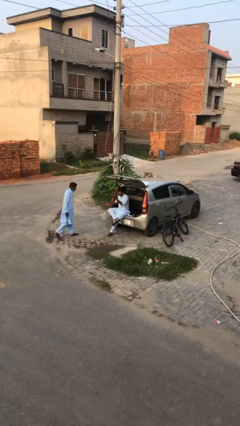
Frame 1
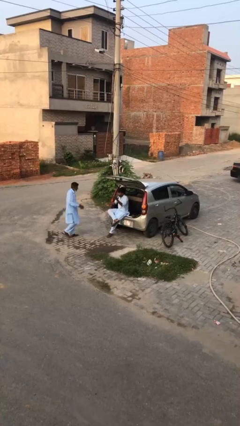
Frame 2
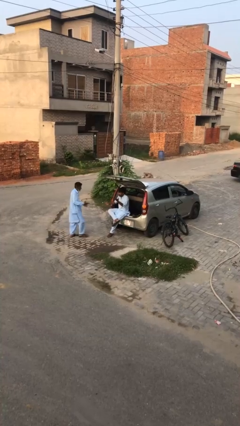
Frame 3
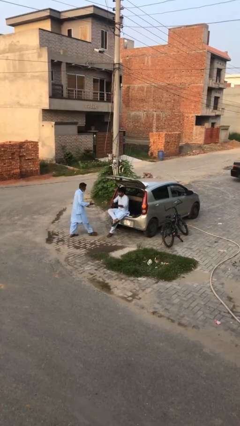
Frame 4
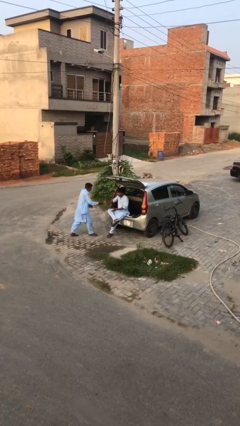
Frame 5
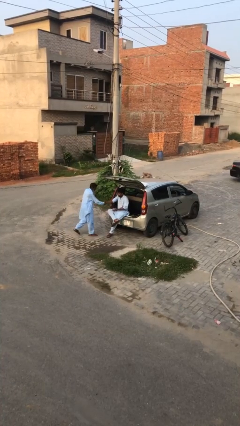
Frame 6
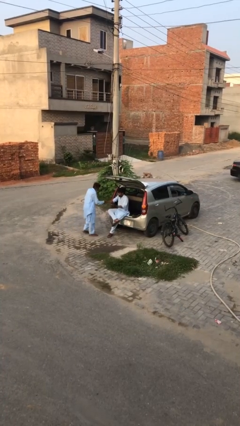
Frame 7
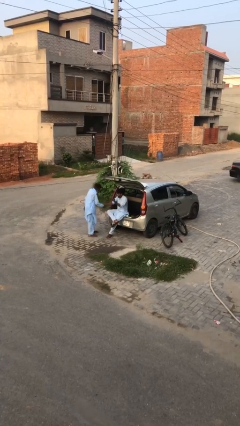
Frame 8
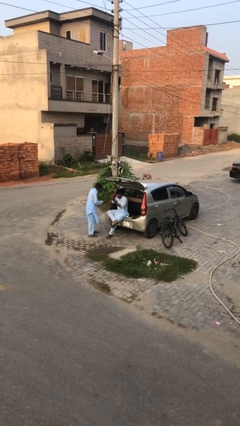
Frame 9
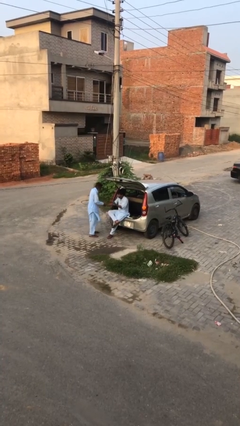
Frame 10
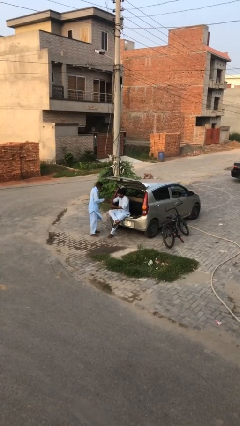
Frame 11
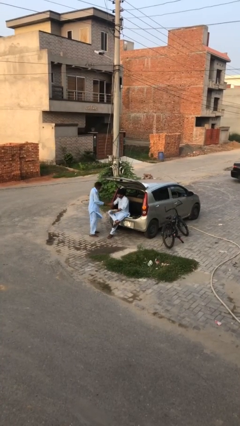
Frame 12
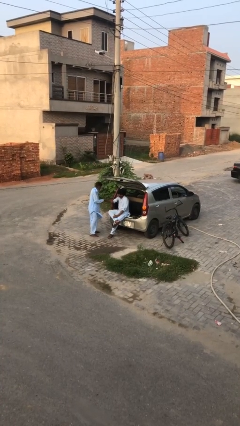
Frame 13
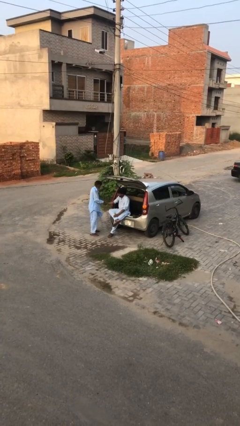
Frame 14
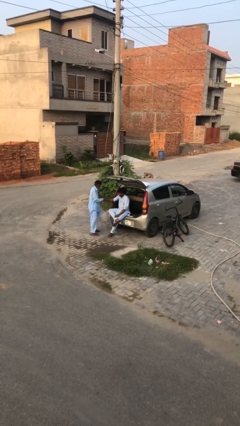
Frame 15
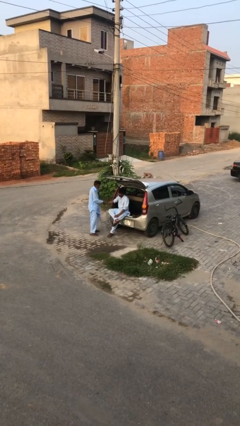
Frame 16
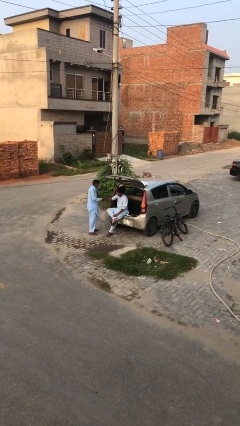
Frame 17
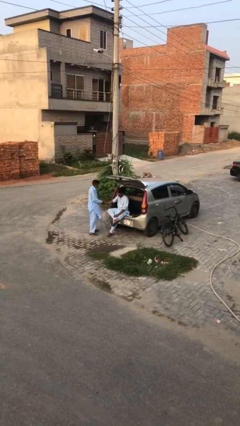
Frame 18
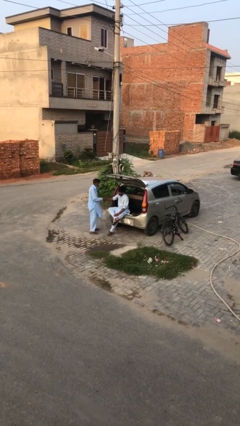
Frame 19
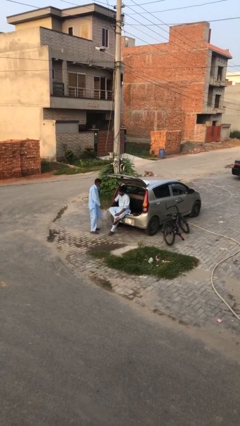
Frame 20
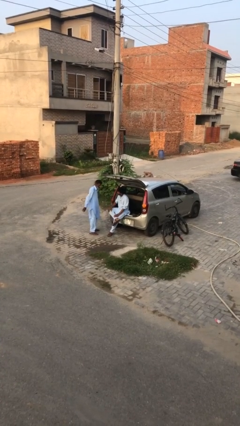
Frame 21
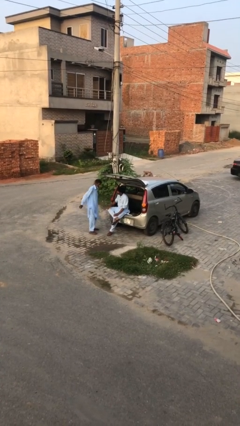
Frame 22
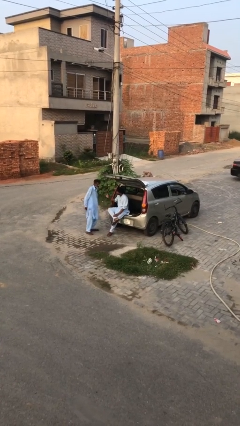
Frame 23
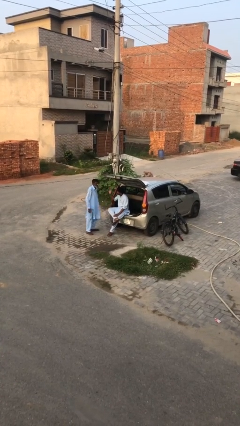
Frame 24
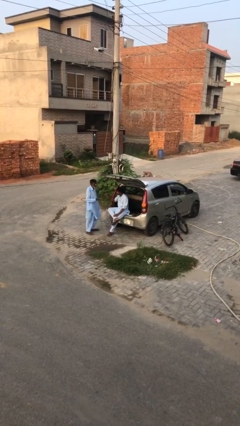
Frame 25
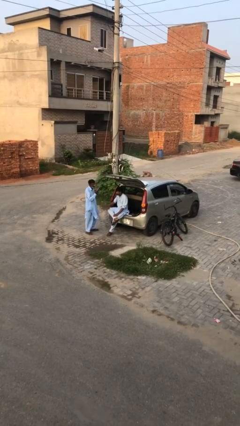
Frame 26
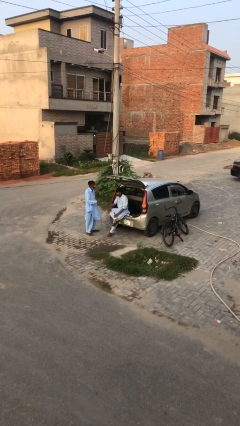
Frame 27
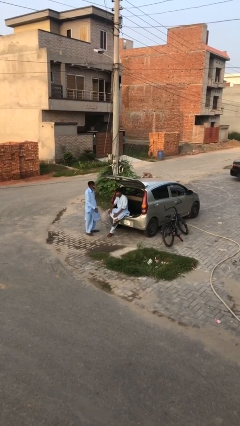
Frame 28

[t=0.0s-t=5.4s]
person shakes hand

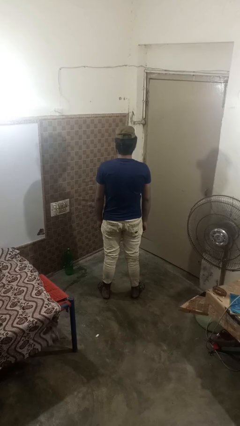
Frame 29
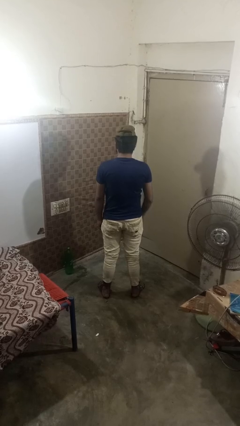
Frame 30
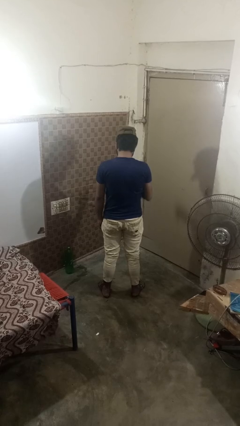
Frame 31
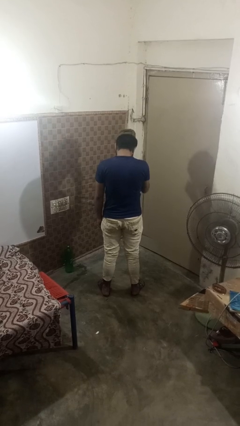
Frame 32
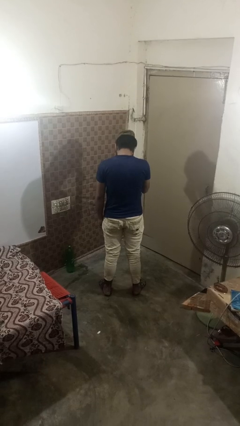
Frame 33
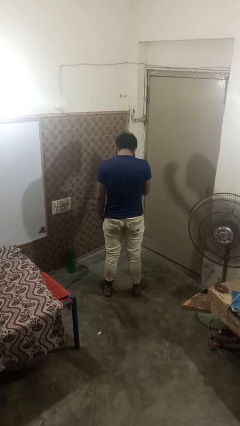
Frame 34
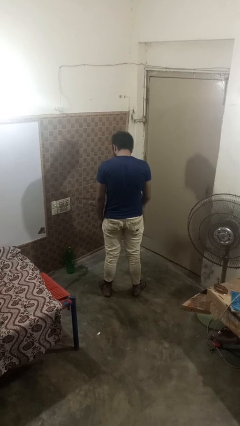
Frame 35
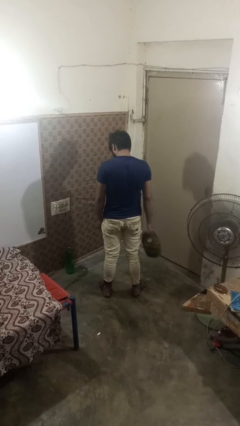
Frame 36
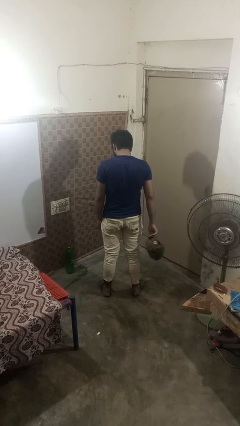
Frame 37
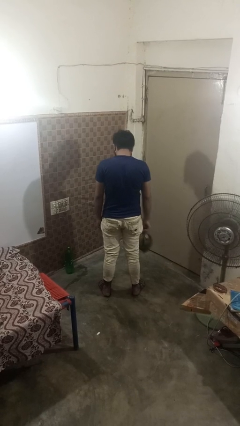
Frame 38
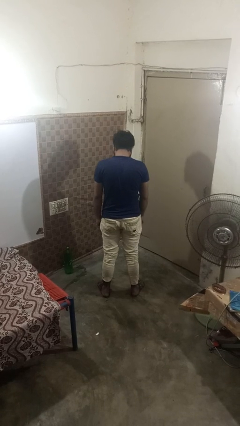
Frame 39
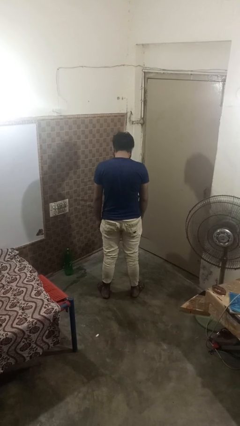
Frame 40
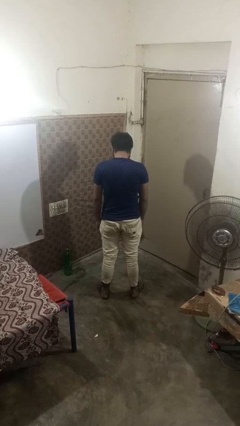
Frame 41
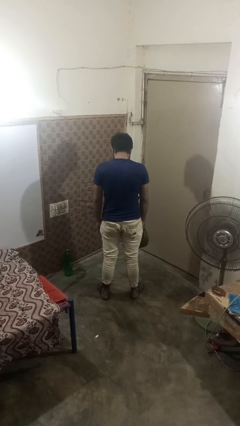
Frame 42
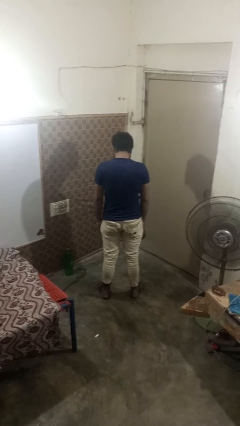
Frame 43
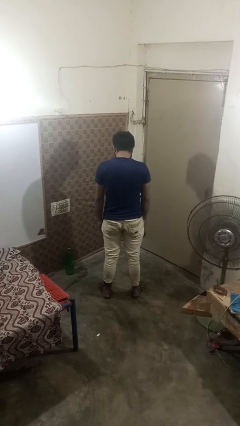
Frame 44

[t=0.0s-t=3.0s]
person takes off hat

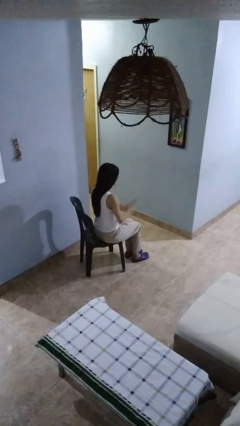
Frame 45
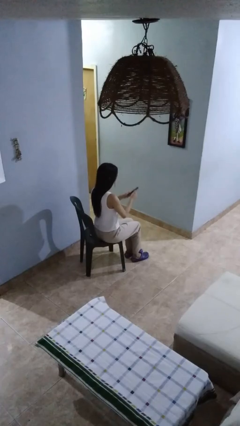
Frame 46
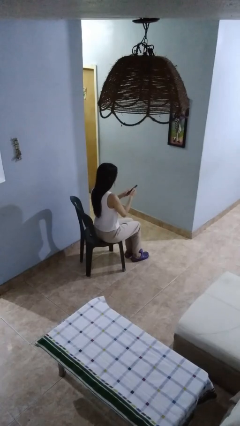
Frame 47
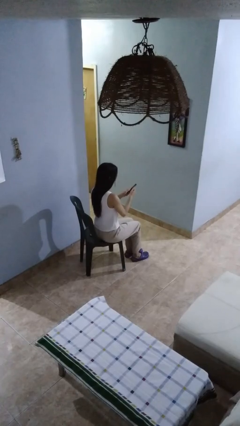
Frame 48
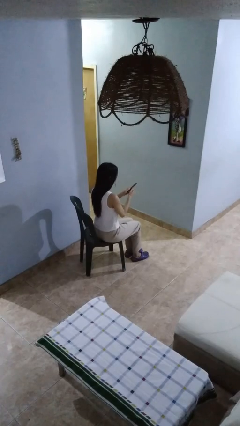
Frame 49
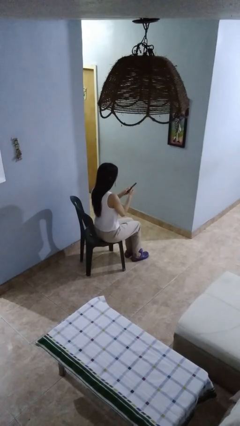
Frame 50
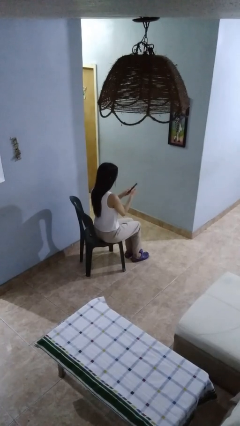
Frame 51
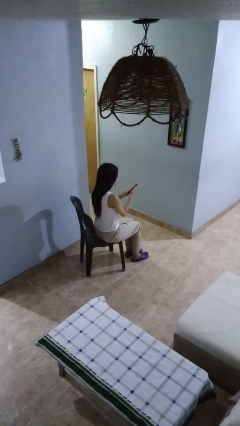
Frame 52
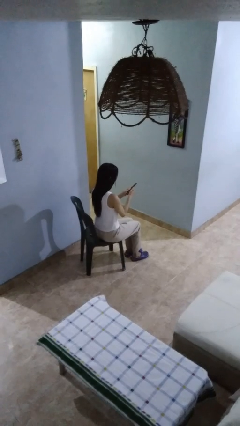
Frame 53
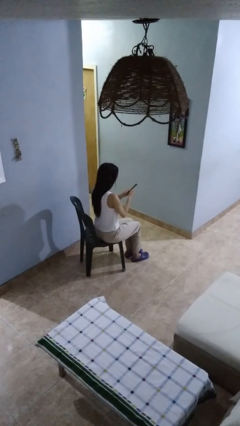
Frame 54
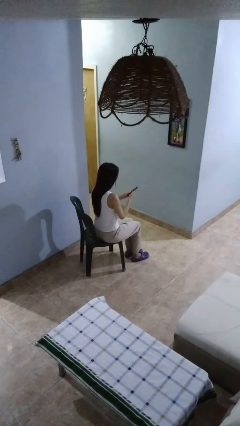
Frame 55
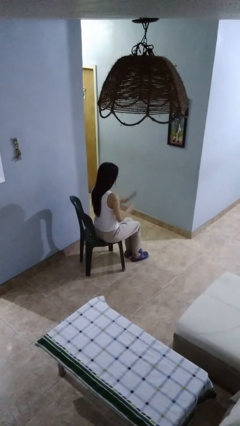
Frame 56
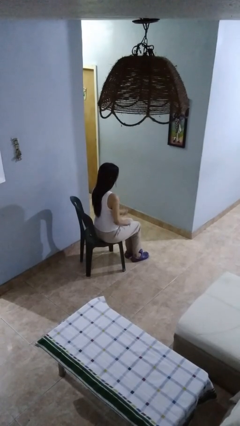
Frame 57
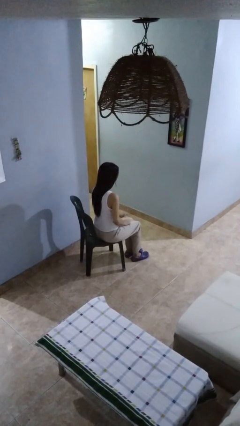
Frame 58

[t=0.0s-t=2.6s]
person files fingernails

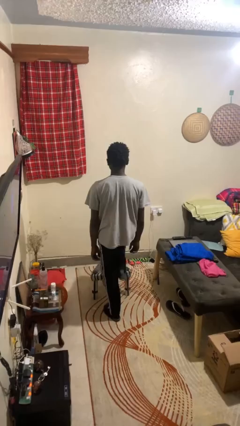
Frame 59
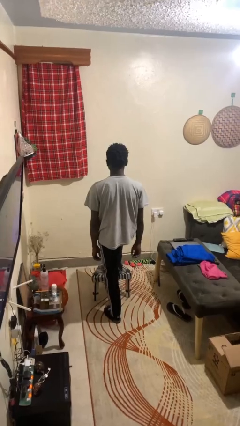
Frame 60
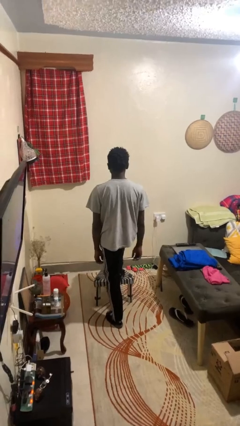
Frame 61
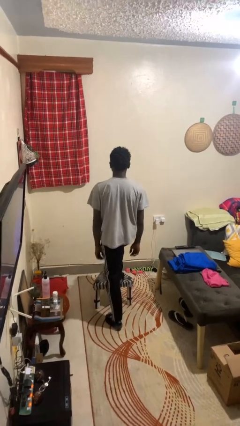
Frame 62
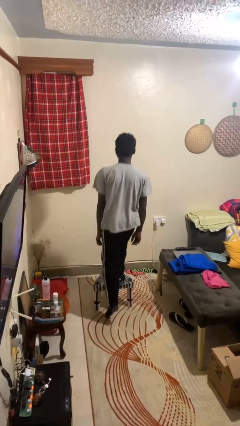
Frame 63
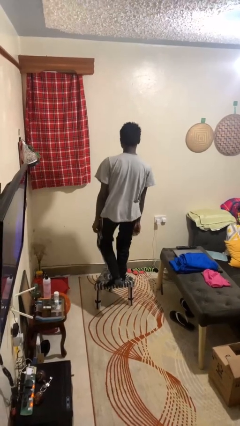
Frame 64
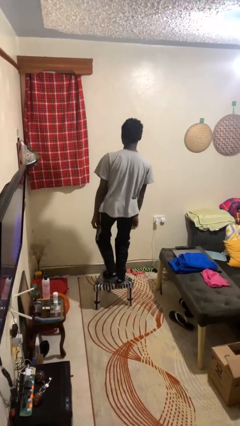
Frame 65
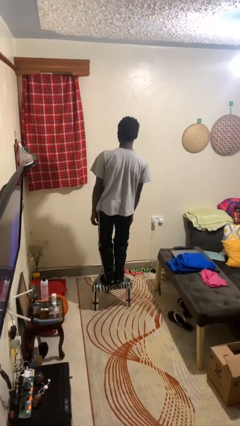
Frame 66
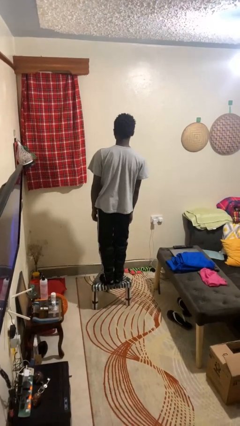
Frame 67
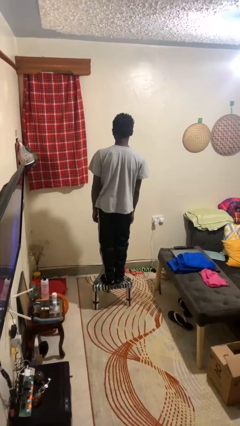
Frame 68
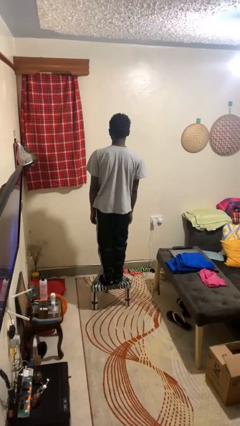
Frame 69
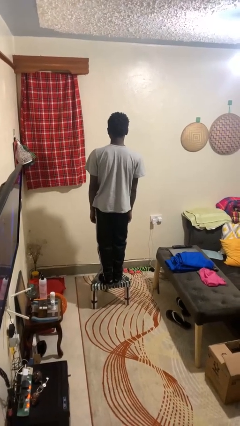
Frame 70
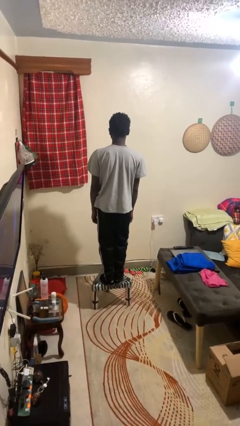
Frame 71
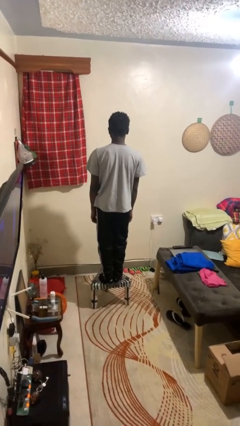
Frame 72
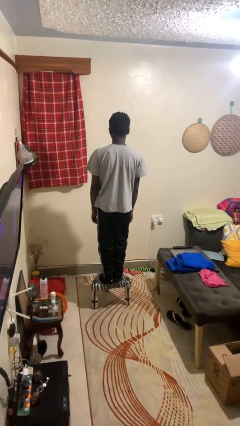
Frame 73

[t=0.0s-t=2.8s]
person climbs on chair

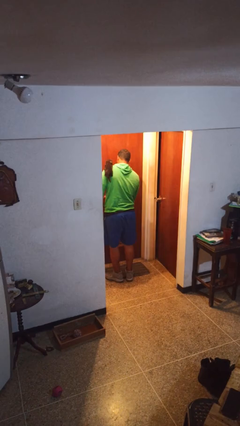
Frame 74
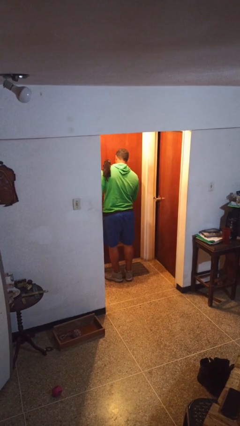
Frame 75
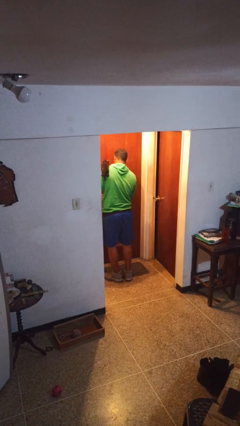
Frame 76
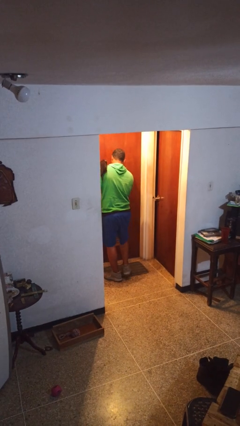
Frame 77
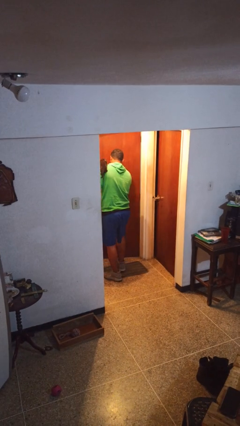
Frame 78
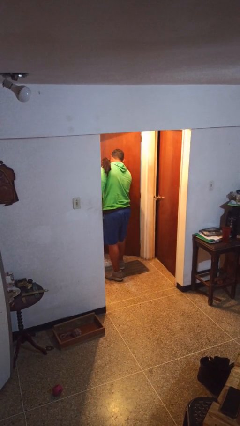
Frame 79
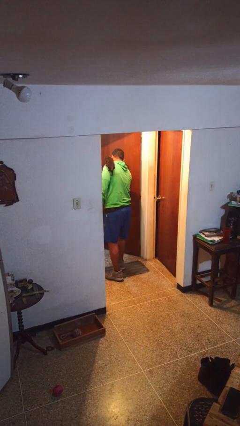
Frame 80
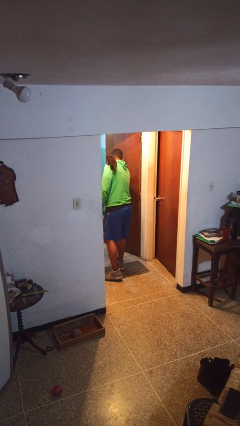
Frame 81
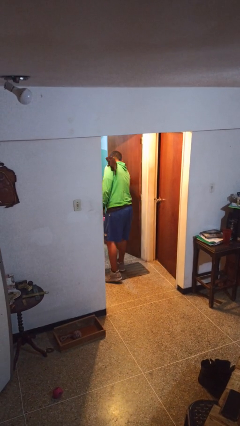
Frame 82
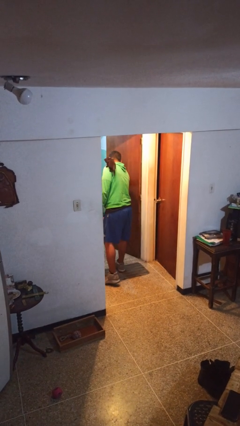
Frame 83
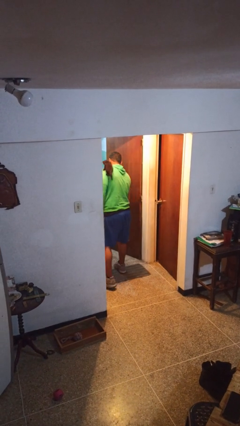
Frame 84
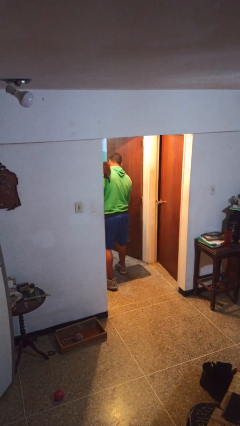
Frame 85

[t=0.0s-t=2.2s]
person opens facility door

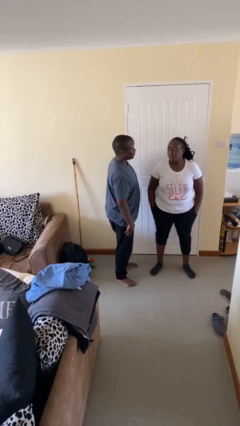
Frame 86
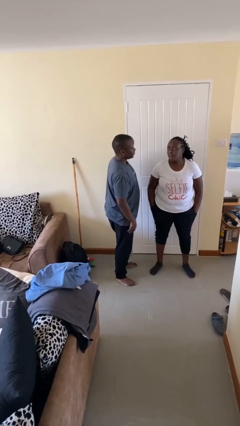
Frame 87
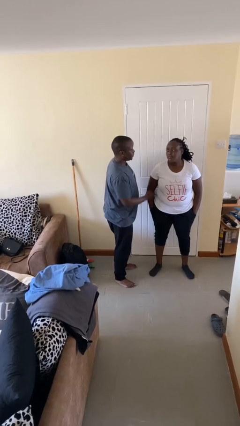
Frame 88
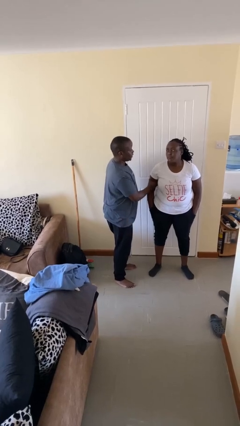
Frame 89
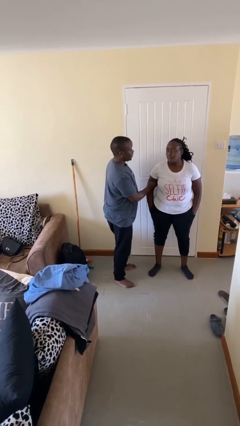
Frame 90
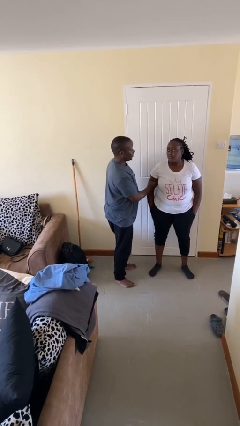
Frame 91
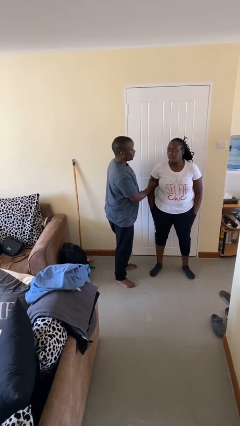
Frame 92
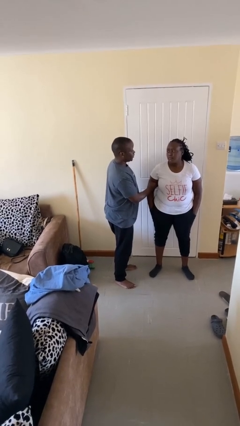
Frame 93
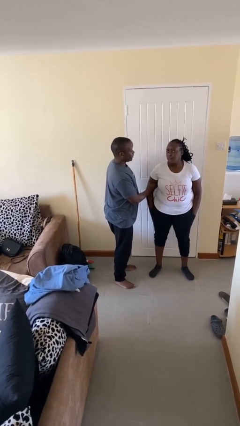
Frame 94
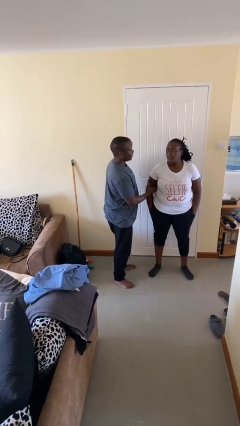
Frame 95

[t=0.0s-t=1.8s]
person grabs person by bicep
